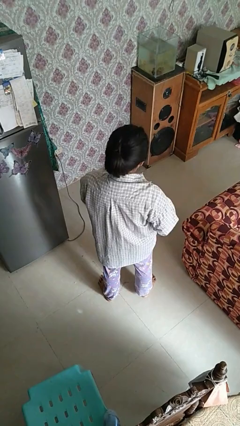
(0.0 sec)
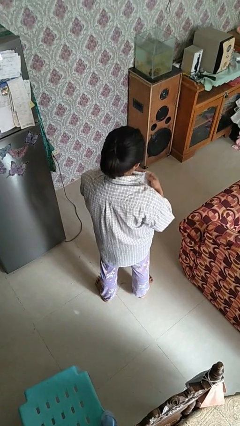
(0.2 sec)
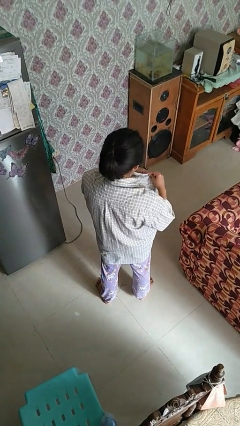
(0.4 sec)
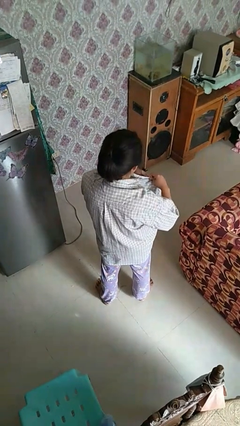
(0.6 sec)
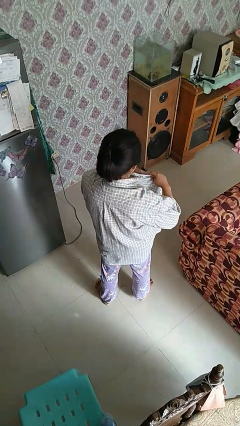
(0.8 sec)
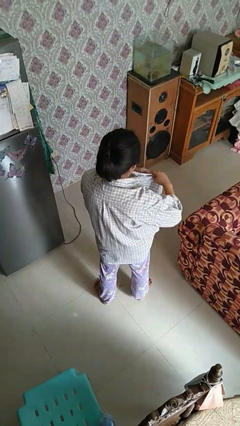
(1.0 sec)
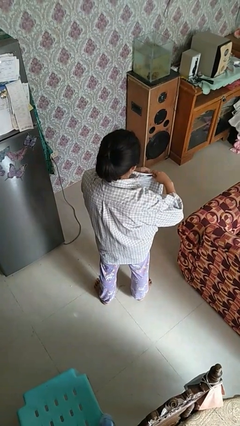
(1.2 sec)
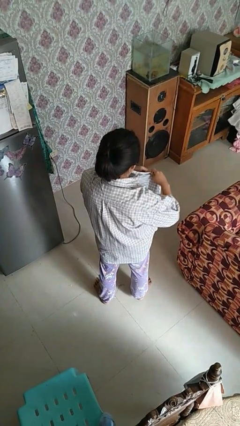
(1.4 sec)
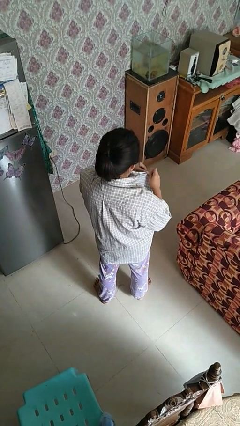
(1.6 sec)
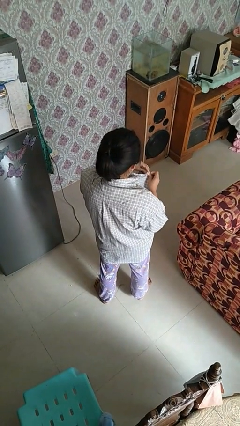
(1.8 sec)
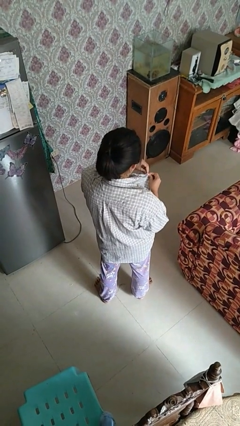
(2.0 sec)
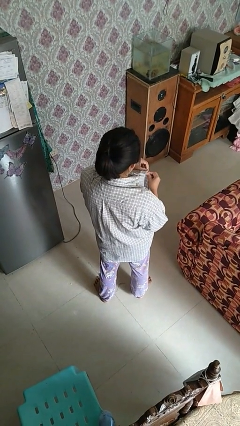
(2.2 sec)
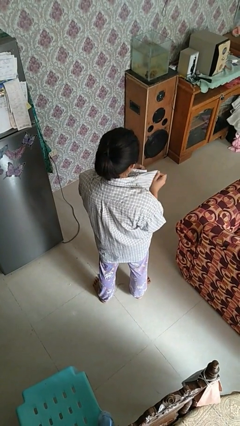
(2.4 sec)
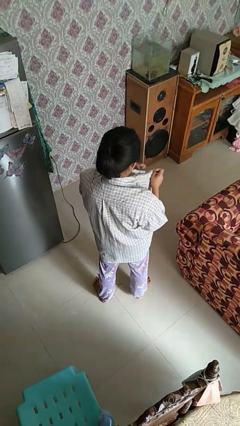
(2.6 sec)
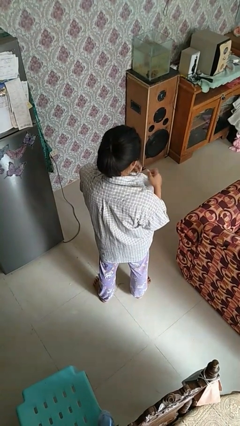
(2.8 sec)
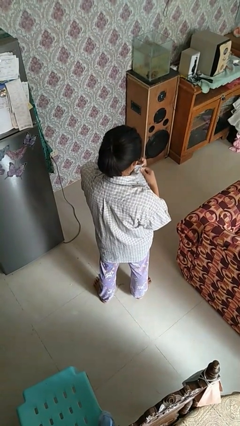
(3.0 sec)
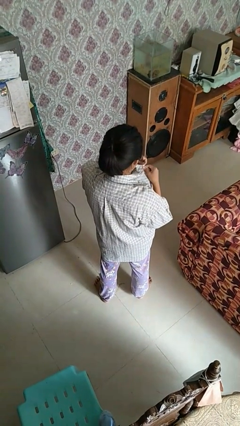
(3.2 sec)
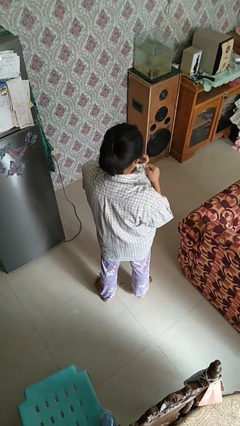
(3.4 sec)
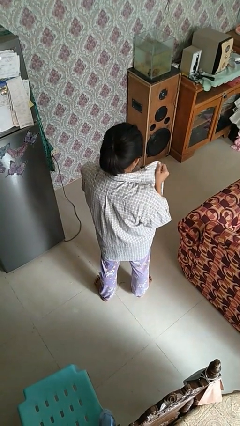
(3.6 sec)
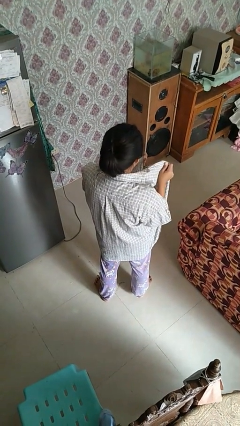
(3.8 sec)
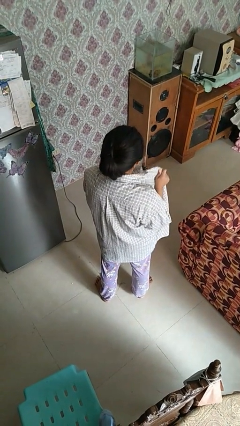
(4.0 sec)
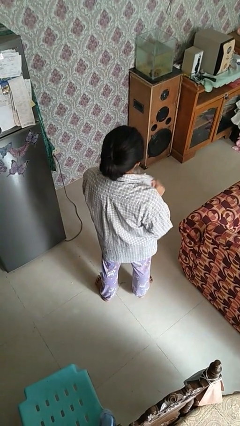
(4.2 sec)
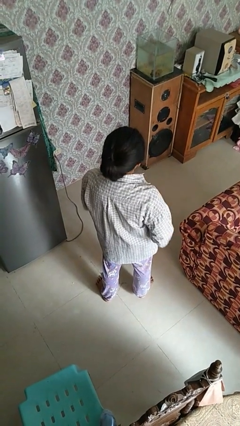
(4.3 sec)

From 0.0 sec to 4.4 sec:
person unbuttons shirt

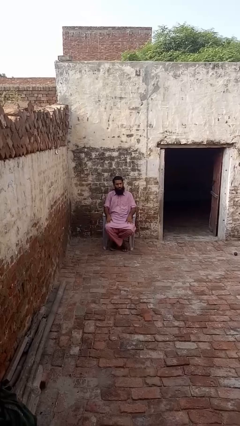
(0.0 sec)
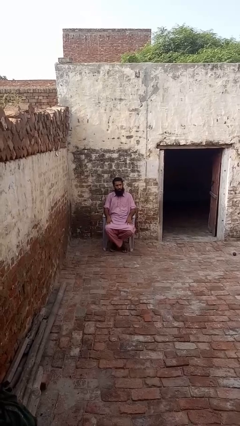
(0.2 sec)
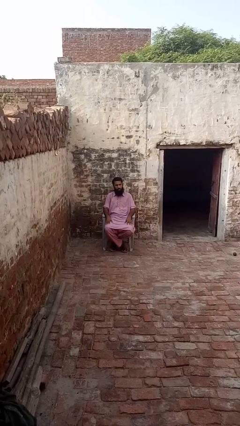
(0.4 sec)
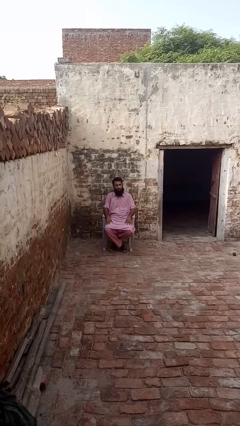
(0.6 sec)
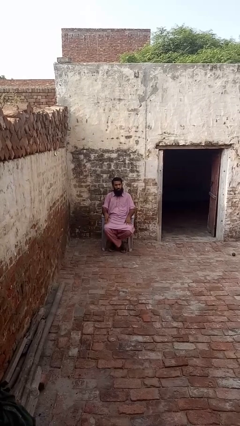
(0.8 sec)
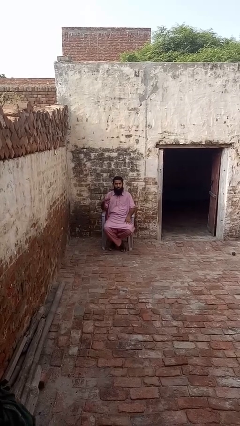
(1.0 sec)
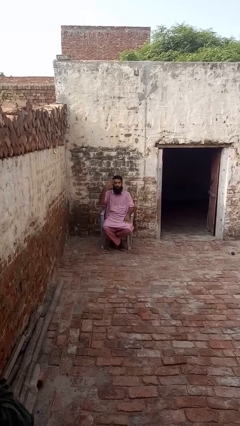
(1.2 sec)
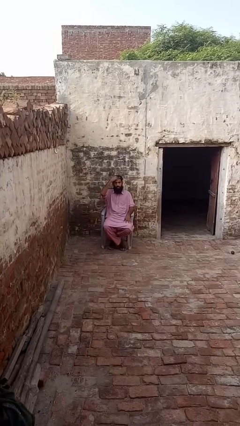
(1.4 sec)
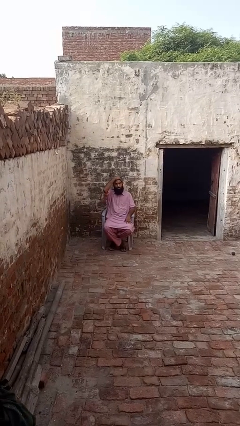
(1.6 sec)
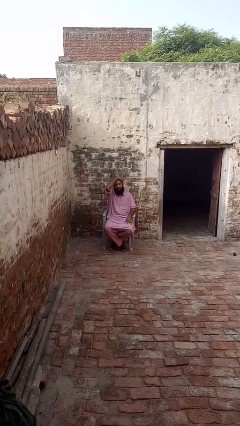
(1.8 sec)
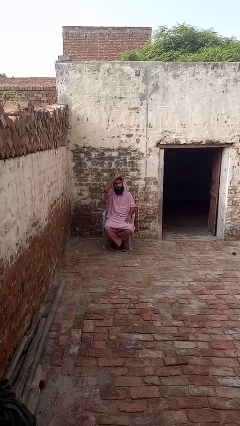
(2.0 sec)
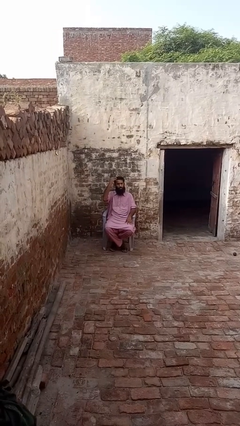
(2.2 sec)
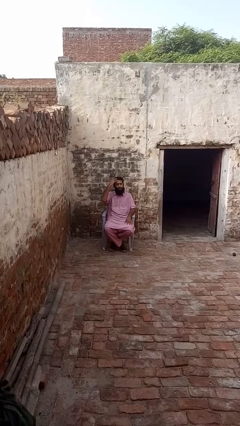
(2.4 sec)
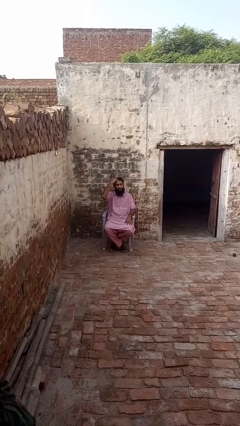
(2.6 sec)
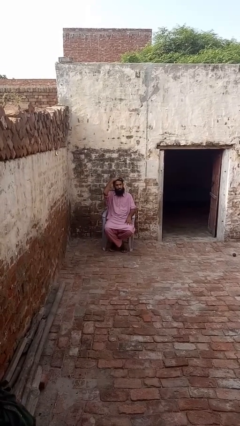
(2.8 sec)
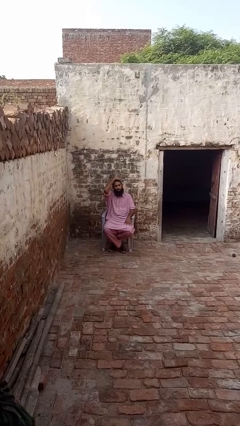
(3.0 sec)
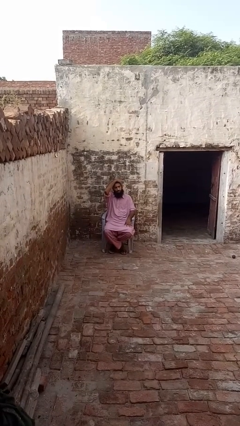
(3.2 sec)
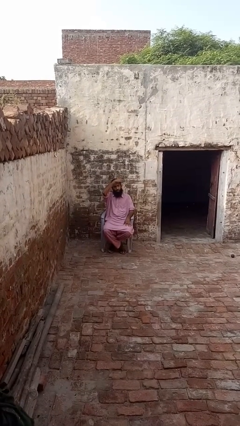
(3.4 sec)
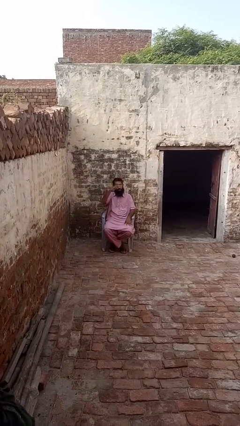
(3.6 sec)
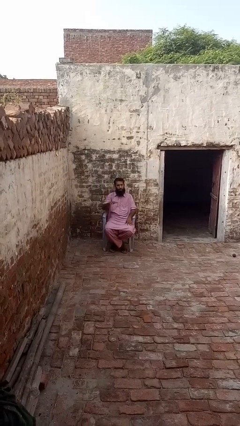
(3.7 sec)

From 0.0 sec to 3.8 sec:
person strokes hair

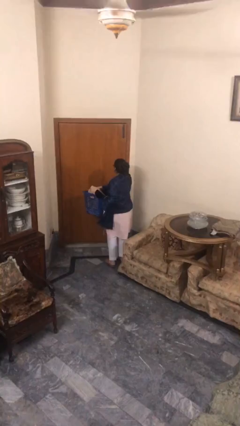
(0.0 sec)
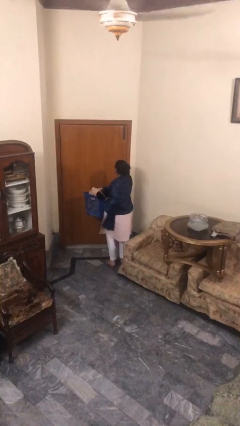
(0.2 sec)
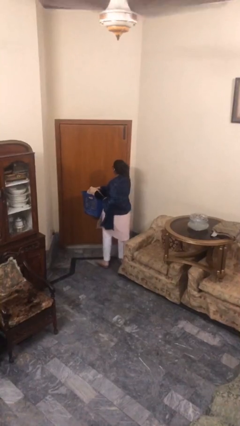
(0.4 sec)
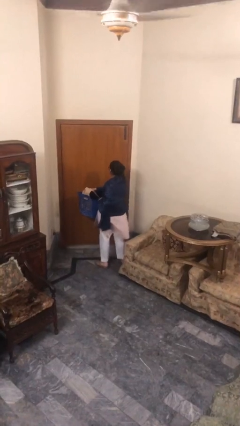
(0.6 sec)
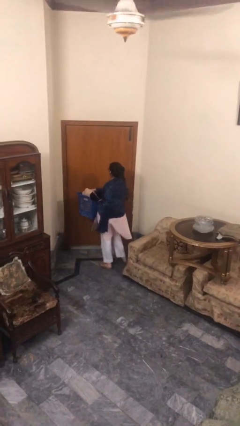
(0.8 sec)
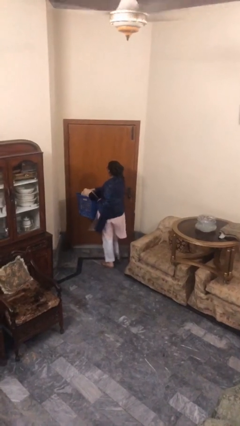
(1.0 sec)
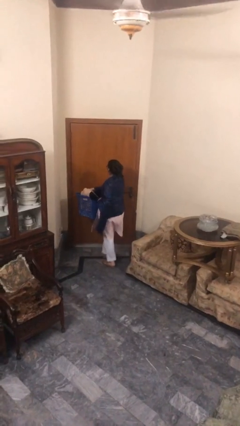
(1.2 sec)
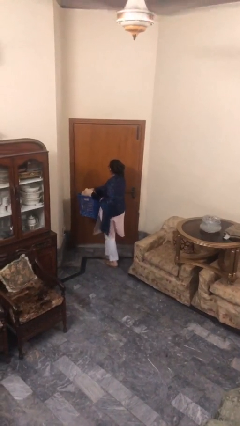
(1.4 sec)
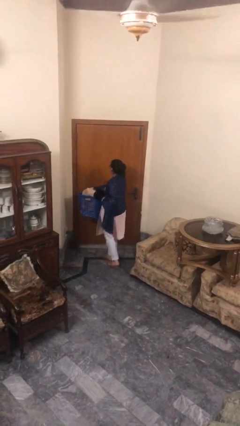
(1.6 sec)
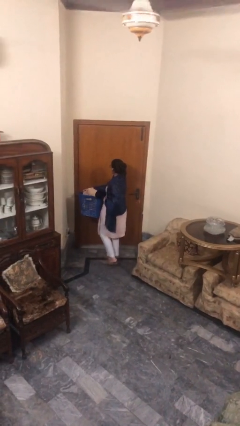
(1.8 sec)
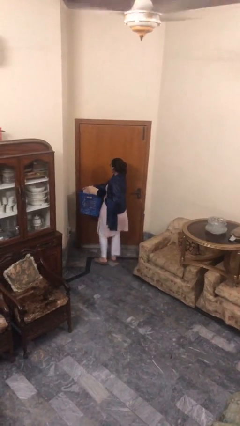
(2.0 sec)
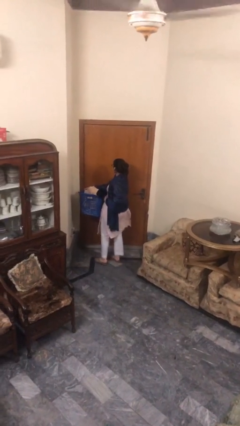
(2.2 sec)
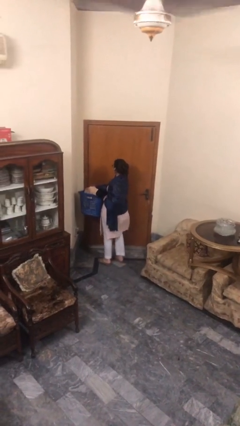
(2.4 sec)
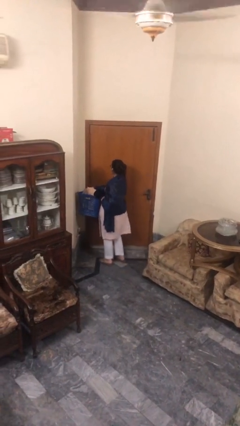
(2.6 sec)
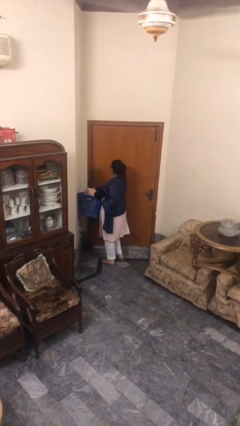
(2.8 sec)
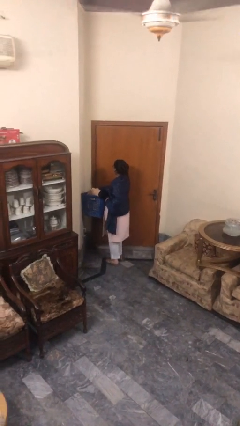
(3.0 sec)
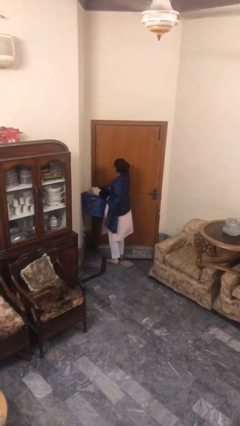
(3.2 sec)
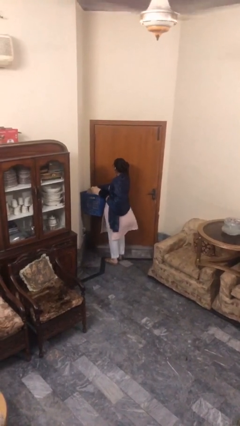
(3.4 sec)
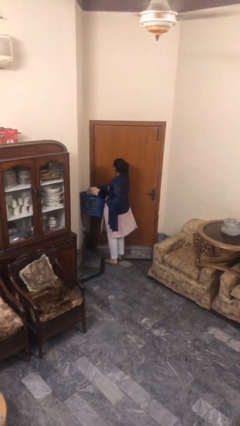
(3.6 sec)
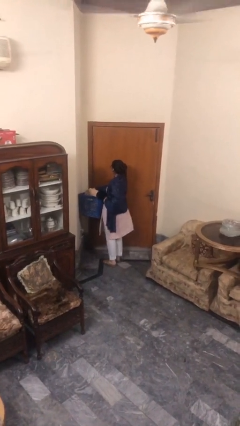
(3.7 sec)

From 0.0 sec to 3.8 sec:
person carries laundry basket

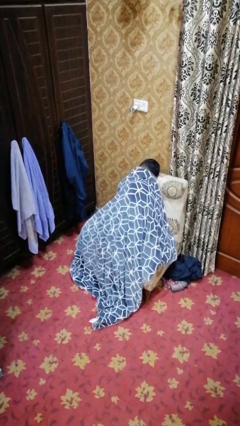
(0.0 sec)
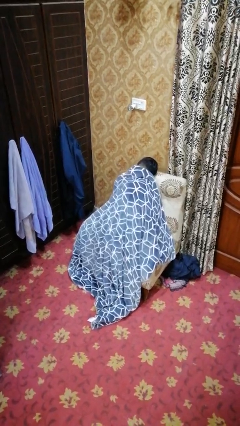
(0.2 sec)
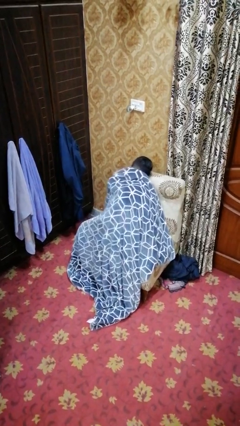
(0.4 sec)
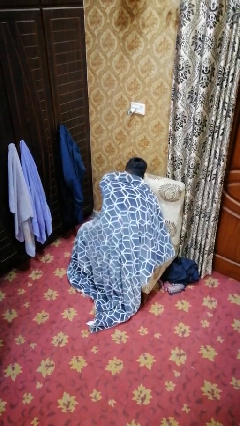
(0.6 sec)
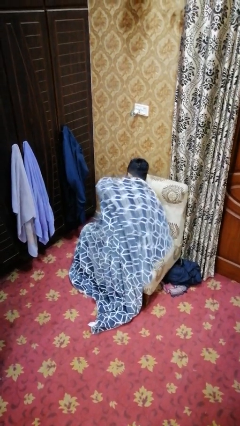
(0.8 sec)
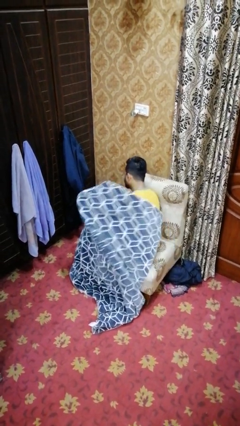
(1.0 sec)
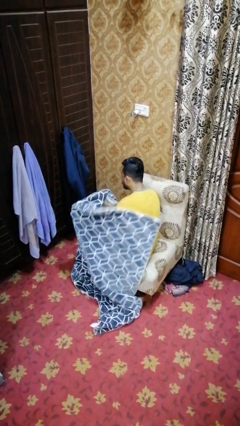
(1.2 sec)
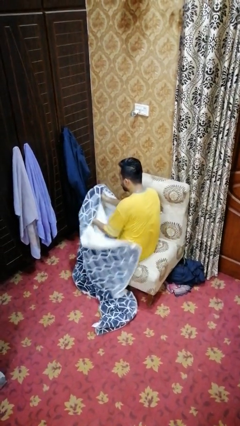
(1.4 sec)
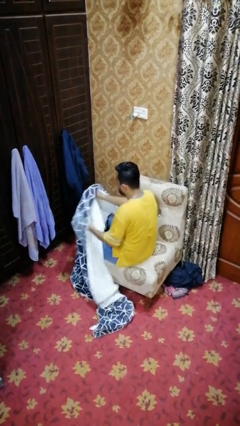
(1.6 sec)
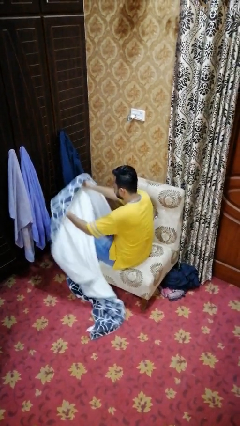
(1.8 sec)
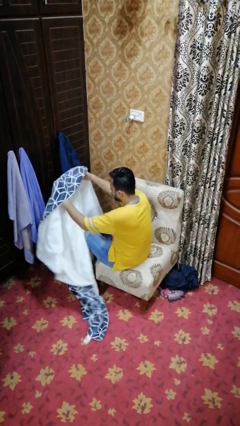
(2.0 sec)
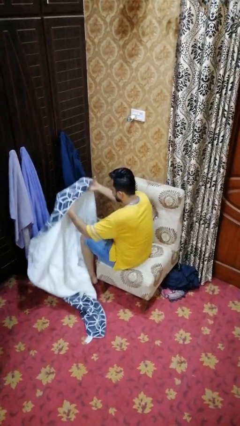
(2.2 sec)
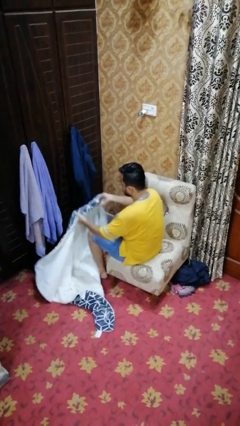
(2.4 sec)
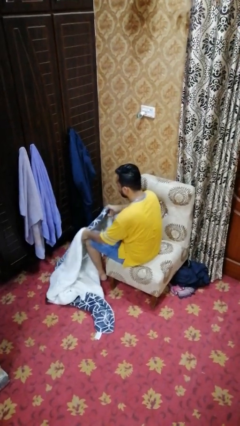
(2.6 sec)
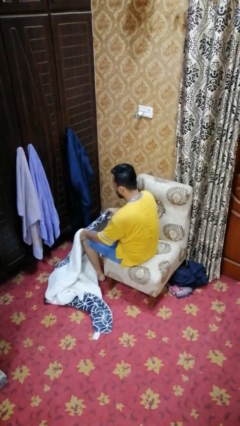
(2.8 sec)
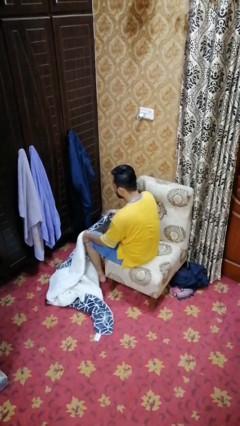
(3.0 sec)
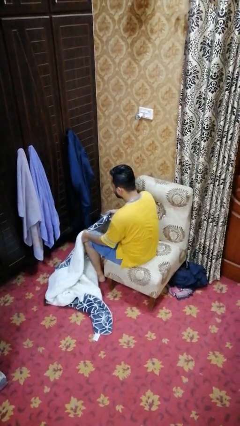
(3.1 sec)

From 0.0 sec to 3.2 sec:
person uncovers with blanket

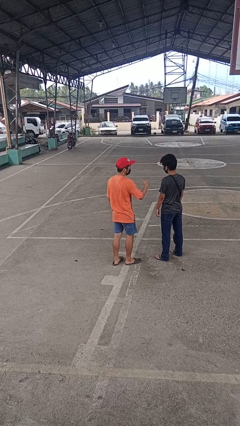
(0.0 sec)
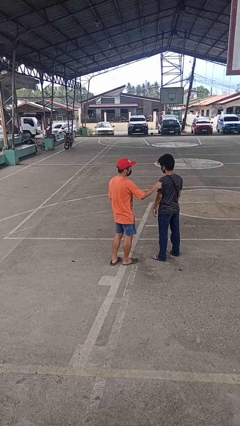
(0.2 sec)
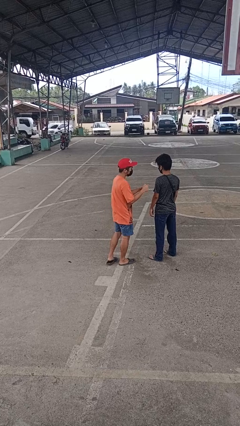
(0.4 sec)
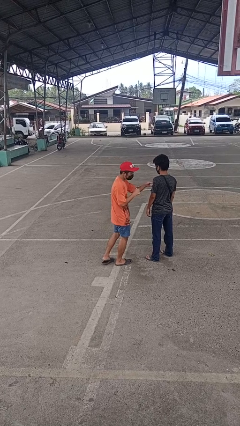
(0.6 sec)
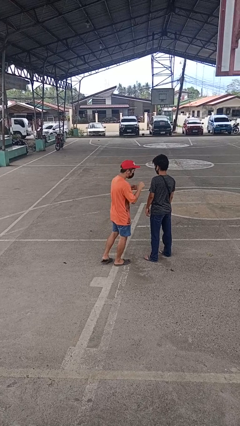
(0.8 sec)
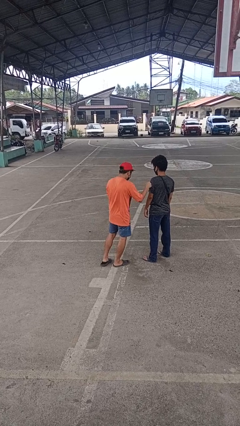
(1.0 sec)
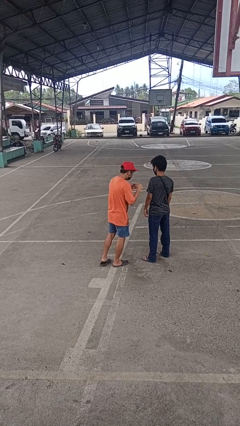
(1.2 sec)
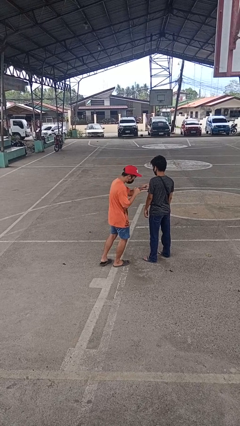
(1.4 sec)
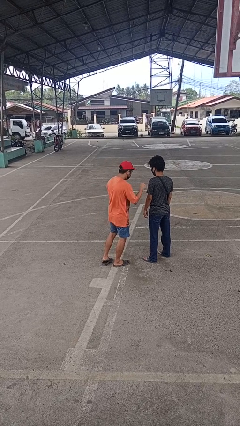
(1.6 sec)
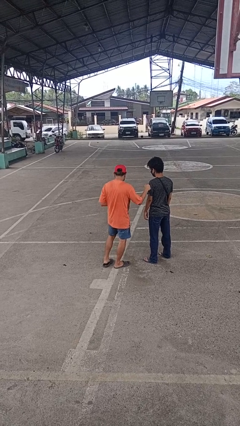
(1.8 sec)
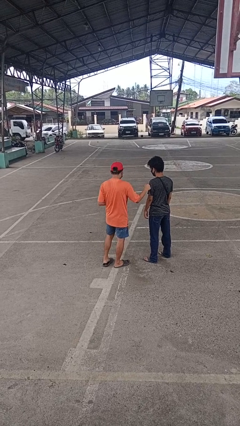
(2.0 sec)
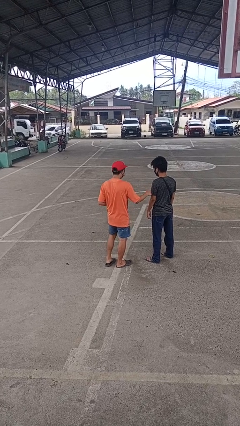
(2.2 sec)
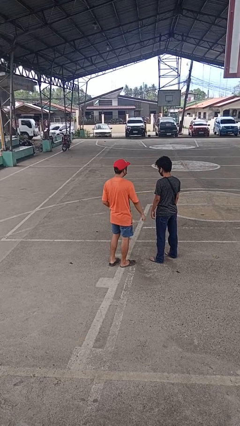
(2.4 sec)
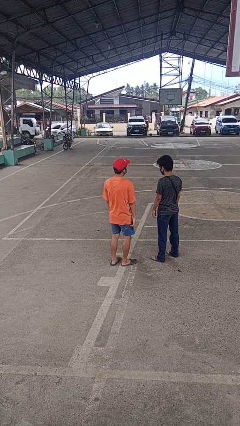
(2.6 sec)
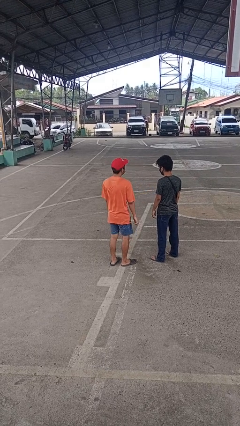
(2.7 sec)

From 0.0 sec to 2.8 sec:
person pounds shoulders of person
